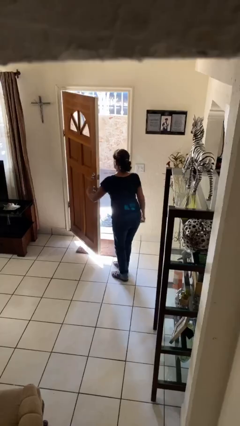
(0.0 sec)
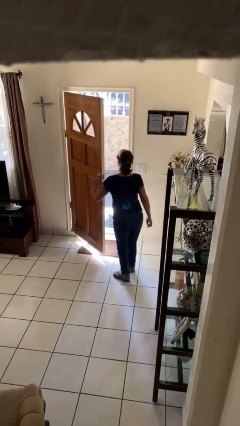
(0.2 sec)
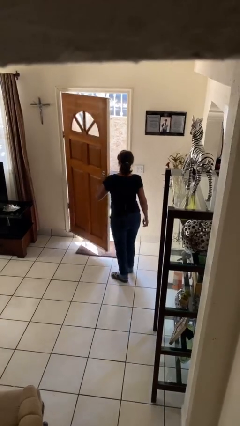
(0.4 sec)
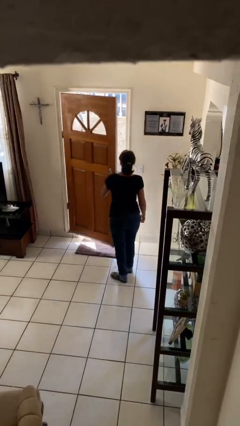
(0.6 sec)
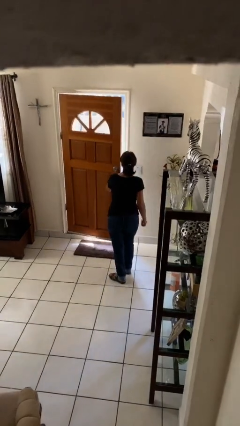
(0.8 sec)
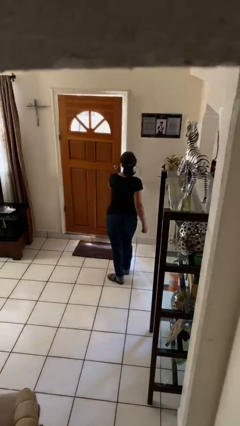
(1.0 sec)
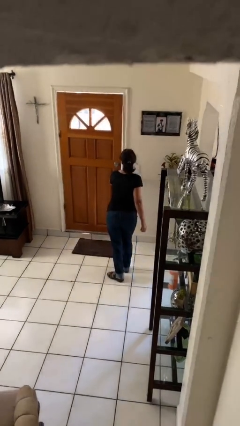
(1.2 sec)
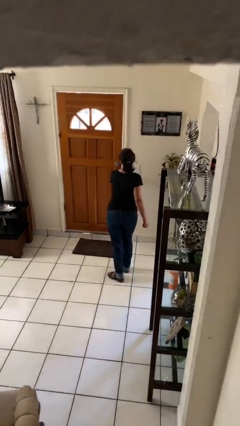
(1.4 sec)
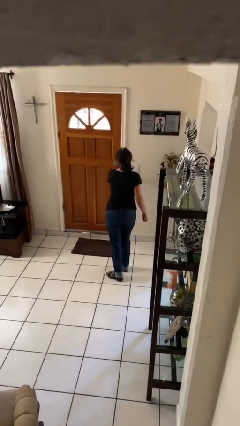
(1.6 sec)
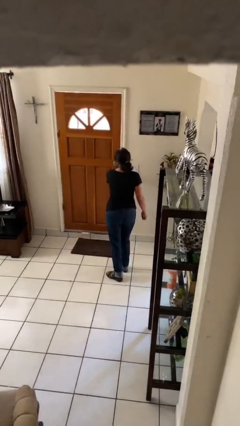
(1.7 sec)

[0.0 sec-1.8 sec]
person closes facility door

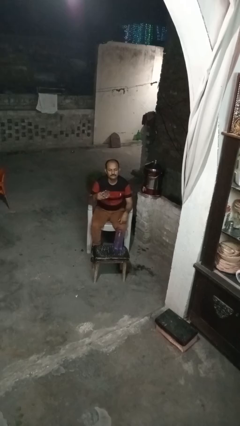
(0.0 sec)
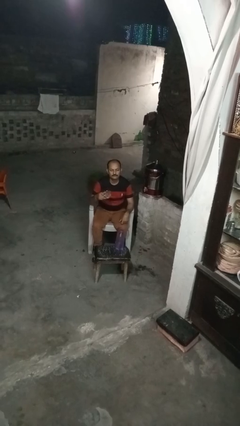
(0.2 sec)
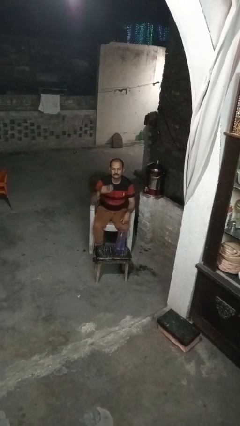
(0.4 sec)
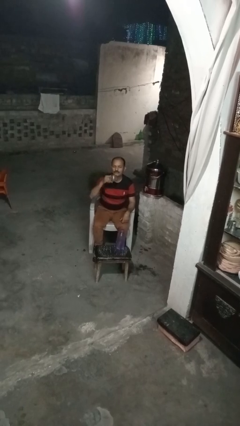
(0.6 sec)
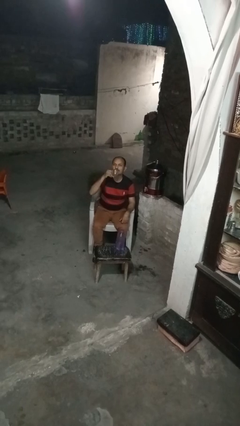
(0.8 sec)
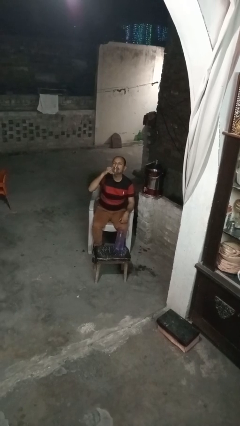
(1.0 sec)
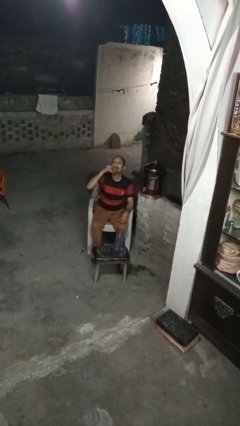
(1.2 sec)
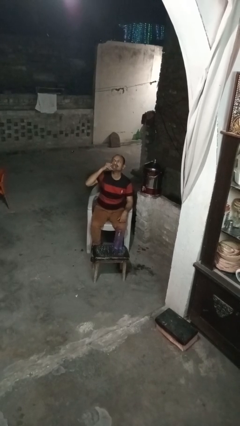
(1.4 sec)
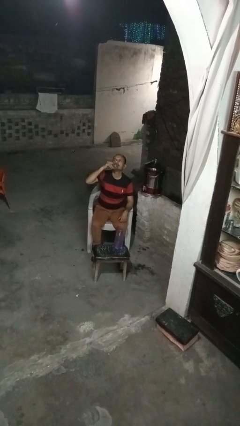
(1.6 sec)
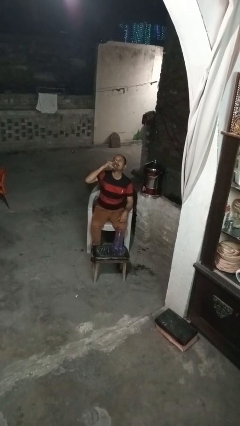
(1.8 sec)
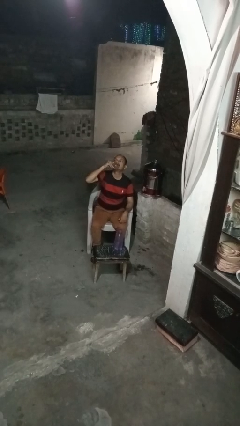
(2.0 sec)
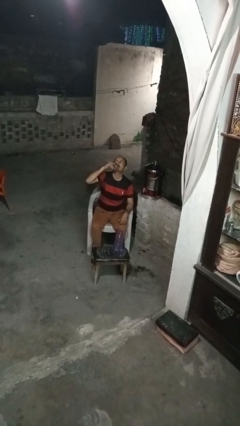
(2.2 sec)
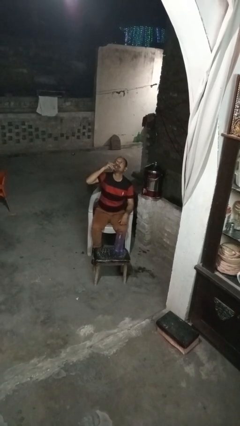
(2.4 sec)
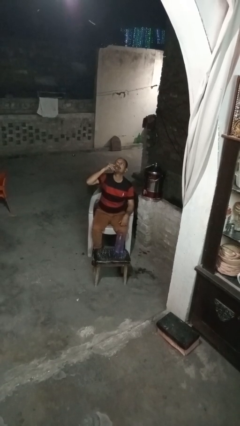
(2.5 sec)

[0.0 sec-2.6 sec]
person drinks from shotglass

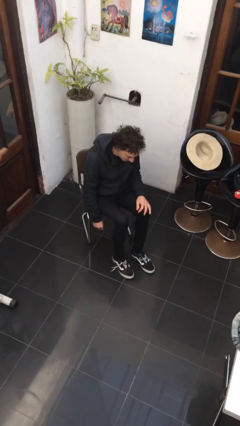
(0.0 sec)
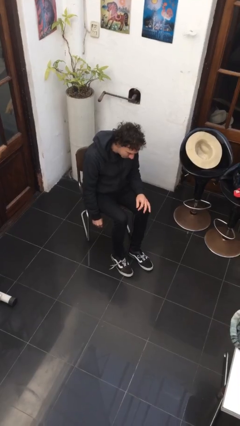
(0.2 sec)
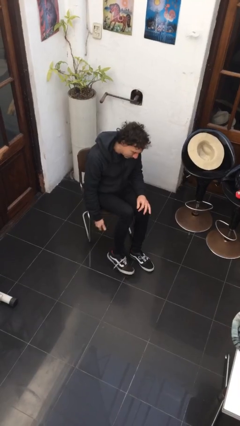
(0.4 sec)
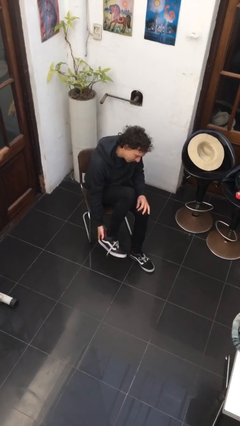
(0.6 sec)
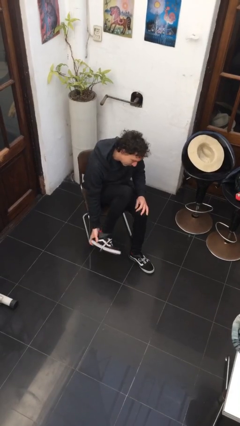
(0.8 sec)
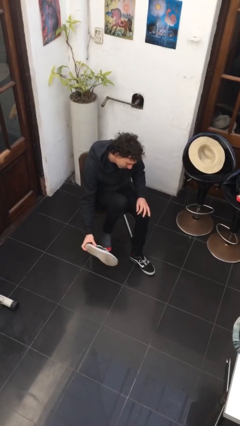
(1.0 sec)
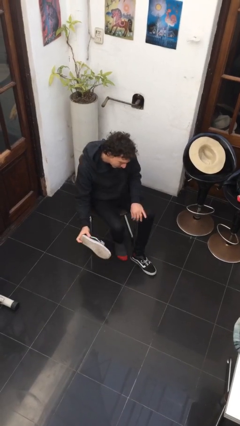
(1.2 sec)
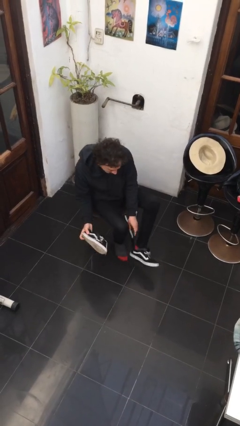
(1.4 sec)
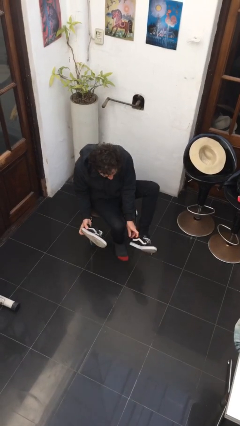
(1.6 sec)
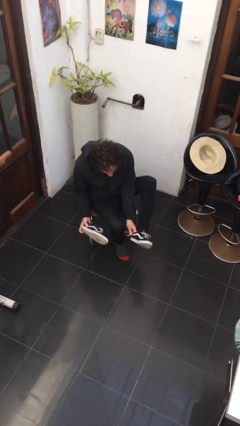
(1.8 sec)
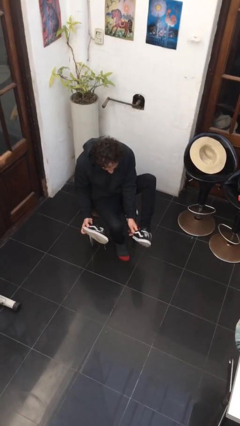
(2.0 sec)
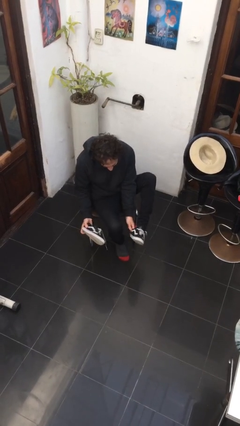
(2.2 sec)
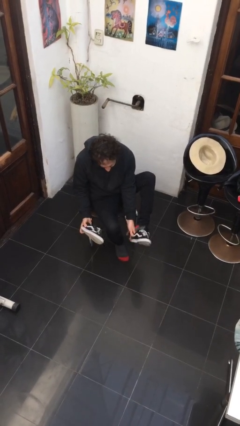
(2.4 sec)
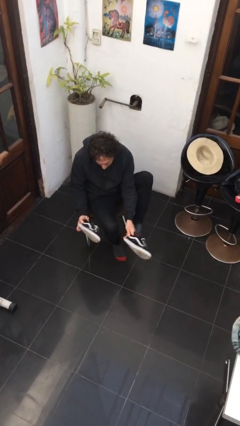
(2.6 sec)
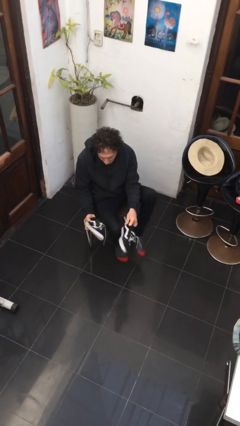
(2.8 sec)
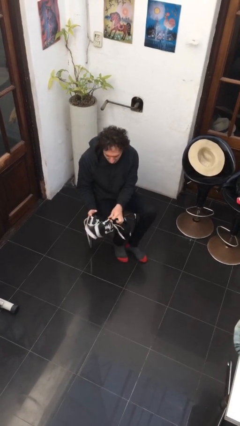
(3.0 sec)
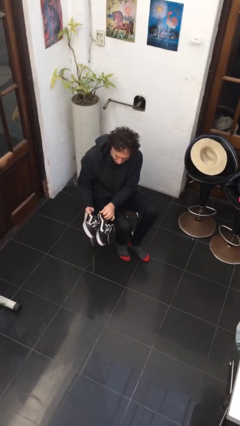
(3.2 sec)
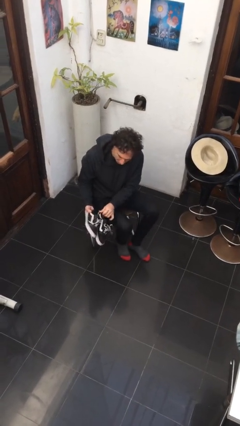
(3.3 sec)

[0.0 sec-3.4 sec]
person takes off shoes

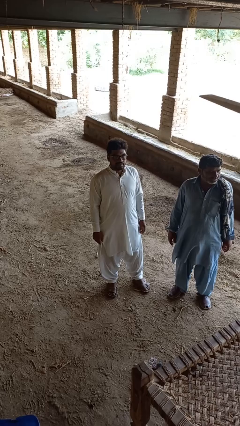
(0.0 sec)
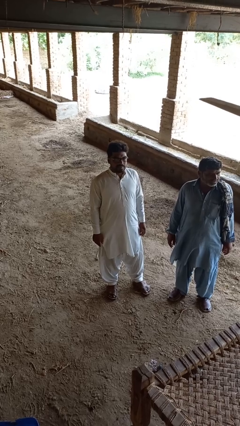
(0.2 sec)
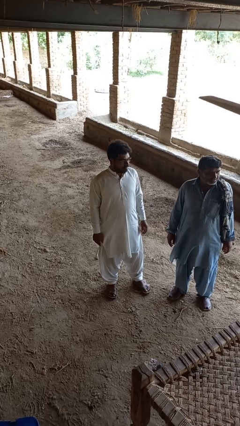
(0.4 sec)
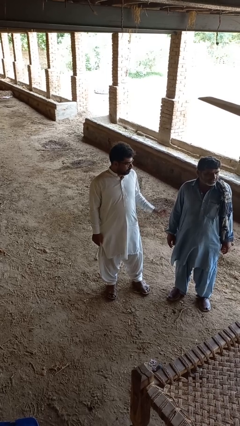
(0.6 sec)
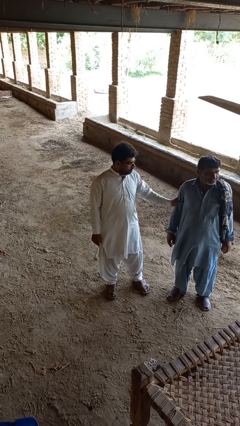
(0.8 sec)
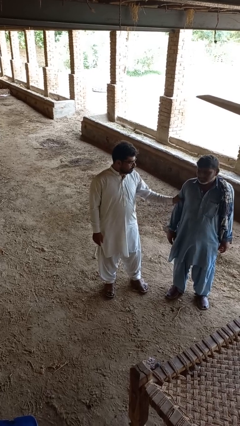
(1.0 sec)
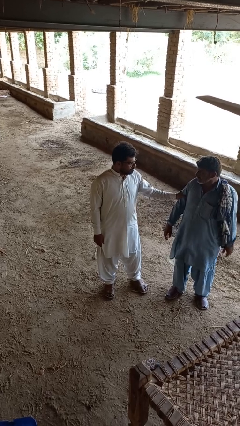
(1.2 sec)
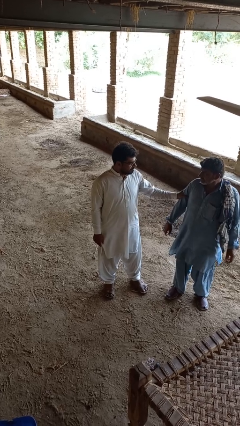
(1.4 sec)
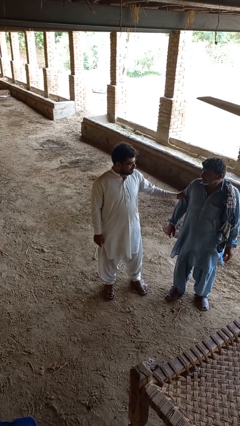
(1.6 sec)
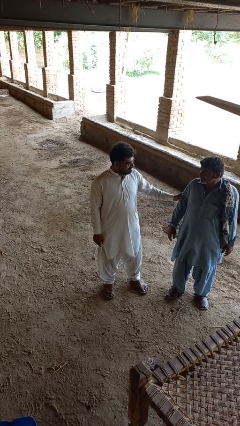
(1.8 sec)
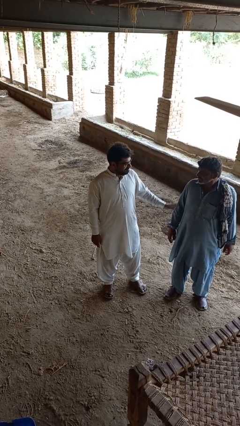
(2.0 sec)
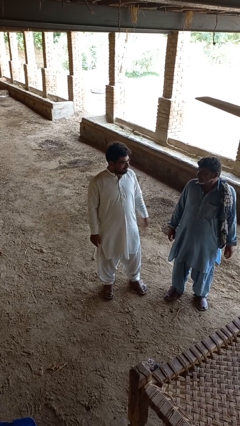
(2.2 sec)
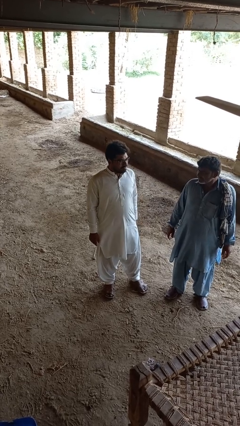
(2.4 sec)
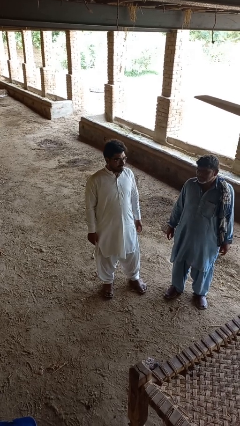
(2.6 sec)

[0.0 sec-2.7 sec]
person grabs person by bicep

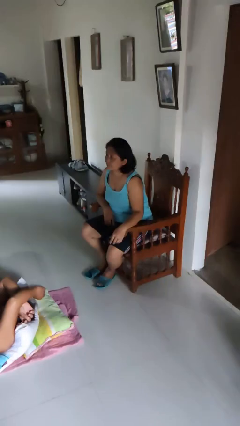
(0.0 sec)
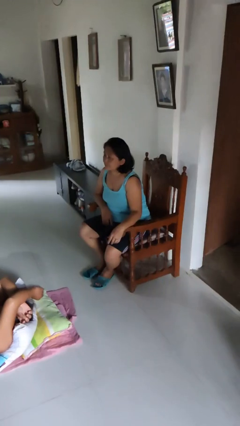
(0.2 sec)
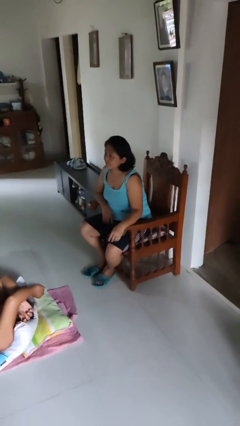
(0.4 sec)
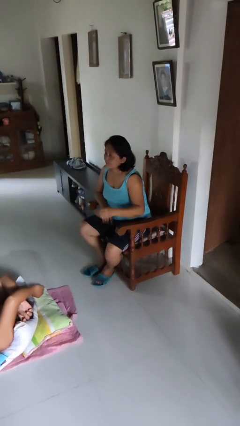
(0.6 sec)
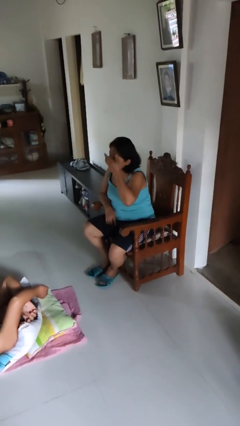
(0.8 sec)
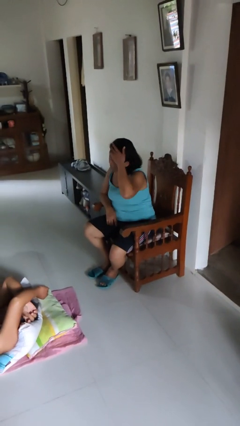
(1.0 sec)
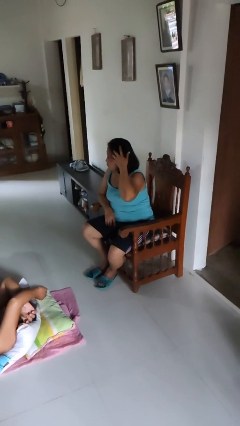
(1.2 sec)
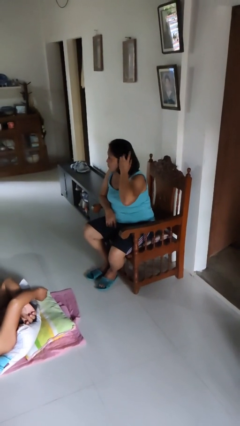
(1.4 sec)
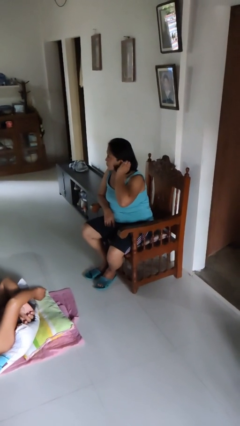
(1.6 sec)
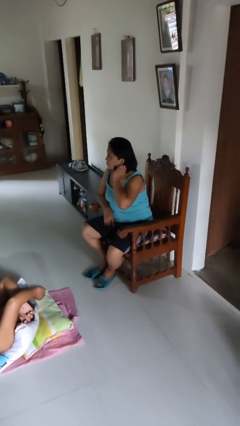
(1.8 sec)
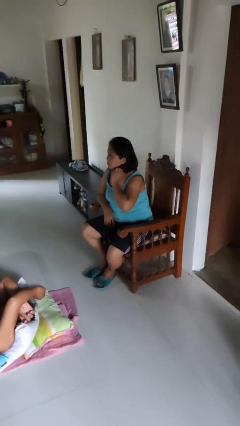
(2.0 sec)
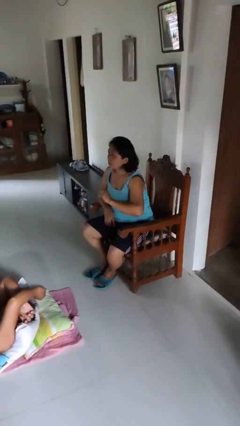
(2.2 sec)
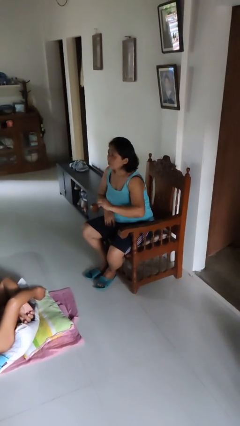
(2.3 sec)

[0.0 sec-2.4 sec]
person strokes hair

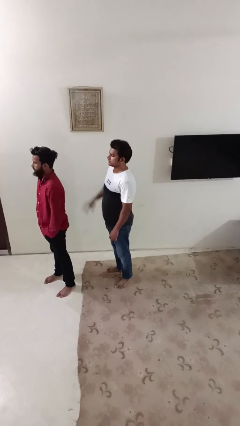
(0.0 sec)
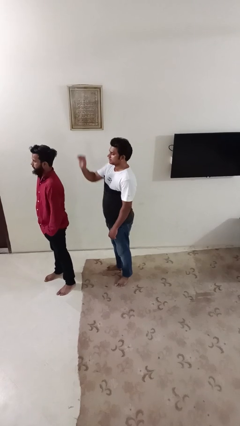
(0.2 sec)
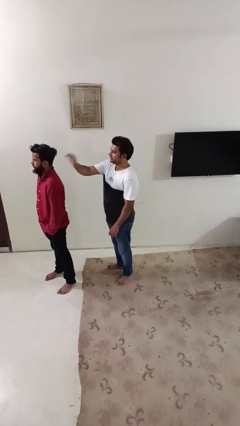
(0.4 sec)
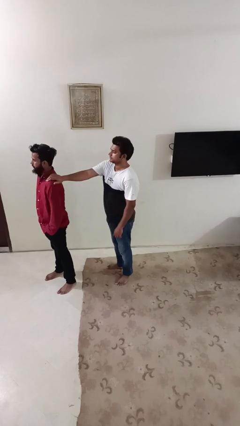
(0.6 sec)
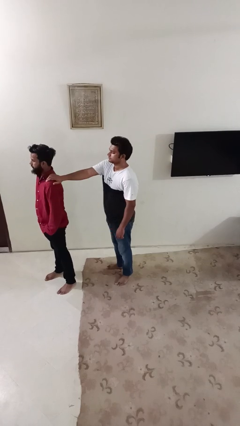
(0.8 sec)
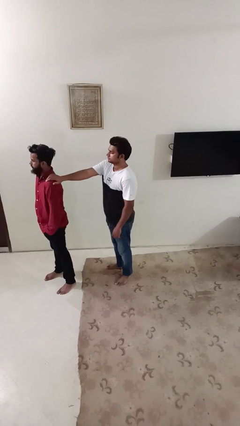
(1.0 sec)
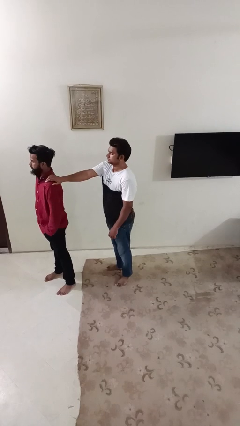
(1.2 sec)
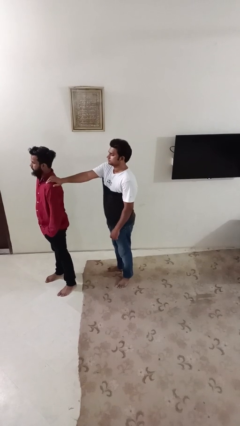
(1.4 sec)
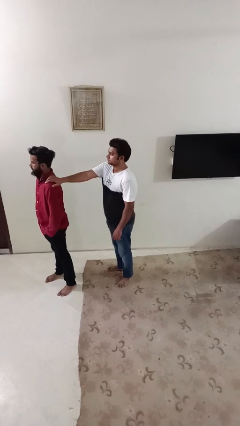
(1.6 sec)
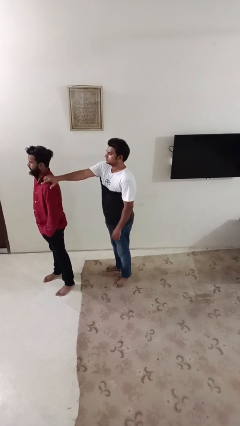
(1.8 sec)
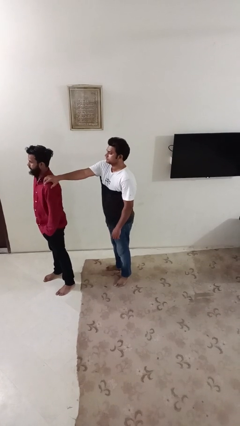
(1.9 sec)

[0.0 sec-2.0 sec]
person grabs person by shoulder

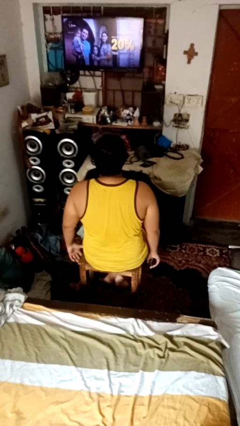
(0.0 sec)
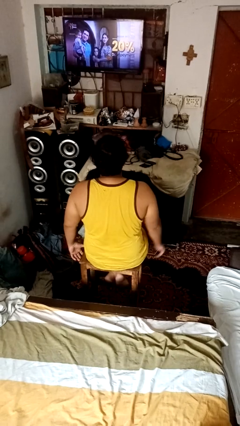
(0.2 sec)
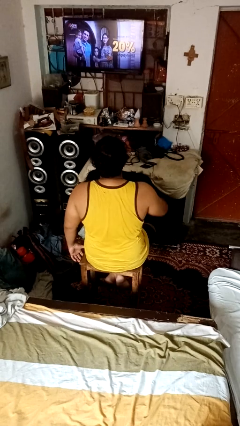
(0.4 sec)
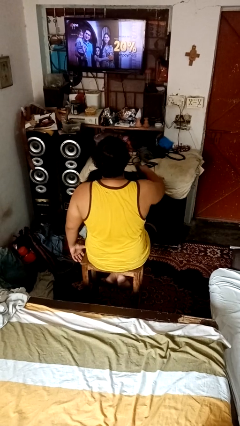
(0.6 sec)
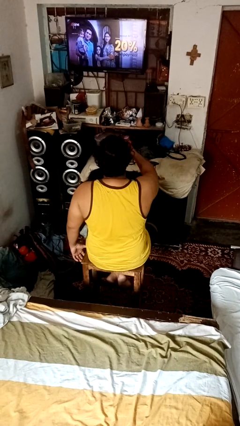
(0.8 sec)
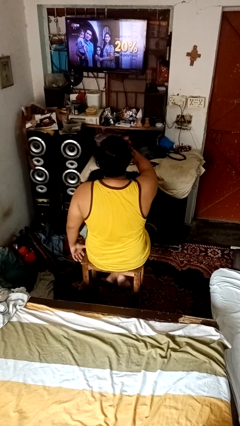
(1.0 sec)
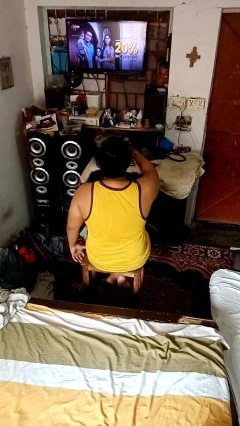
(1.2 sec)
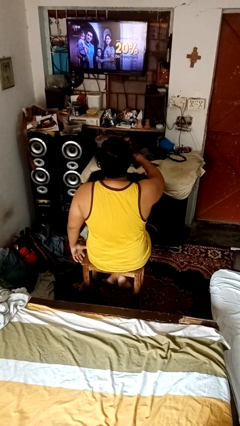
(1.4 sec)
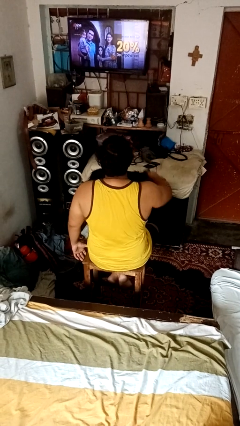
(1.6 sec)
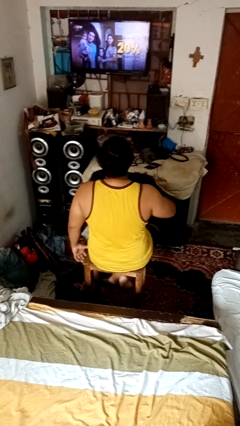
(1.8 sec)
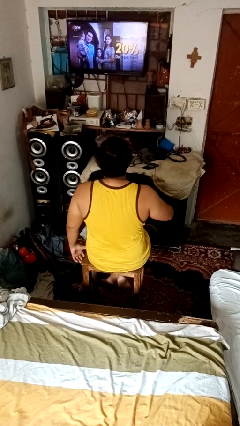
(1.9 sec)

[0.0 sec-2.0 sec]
person uses television remote

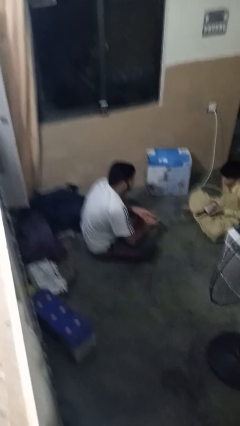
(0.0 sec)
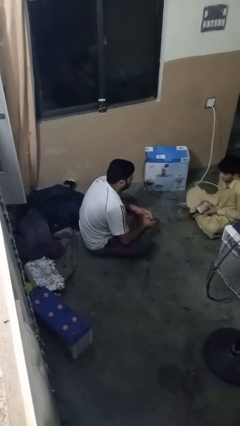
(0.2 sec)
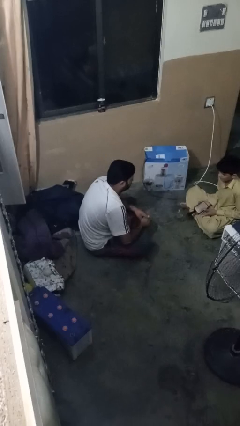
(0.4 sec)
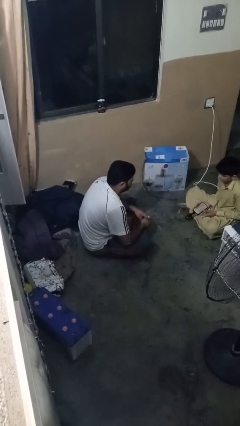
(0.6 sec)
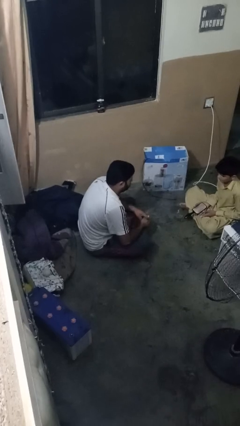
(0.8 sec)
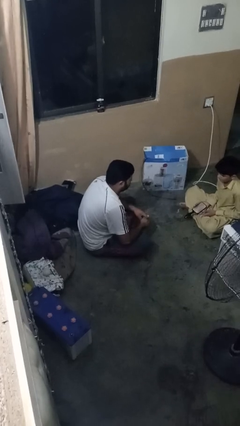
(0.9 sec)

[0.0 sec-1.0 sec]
person throws object to person
